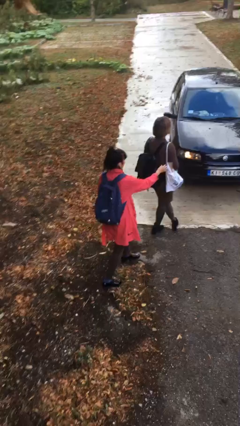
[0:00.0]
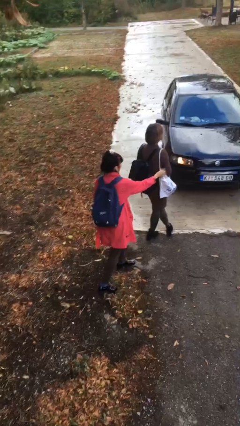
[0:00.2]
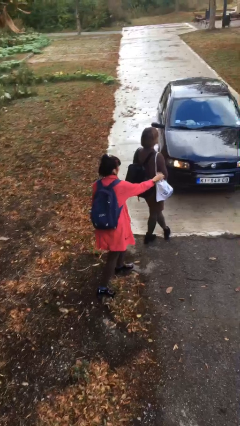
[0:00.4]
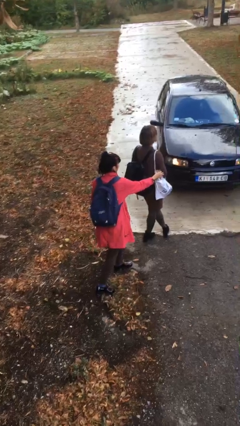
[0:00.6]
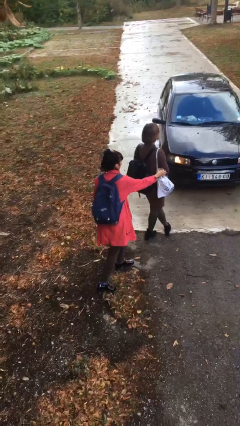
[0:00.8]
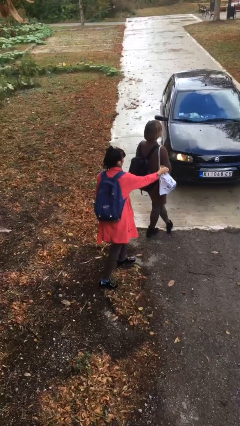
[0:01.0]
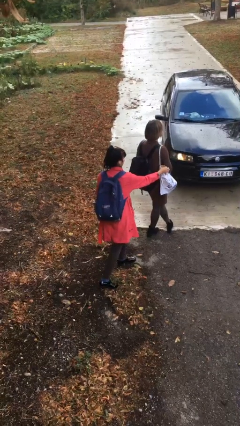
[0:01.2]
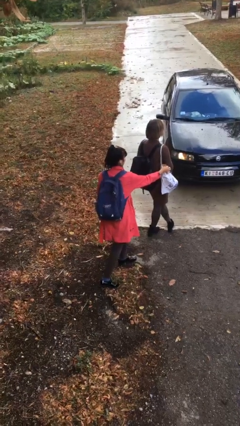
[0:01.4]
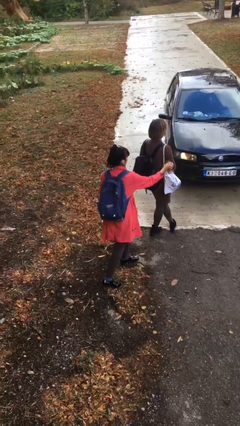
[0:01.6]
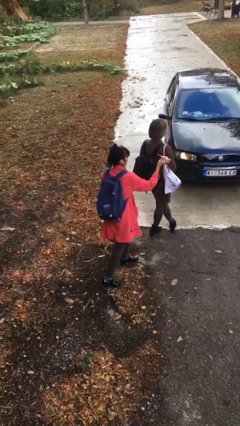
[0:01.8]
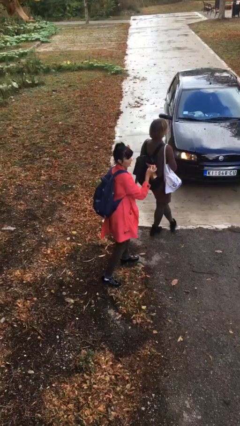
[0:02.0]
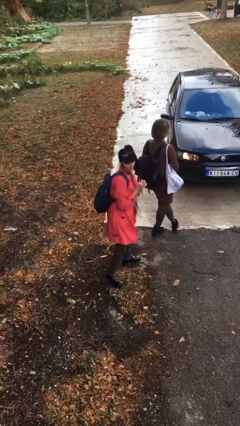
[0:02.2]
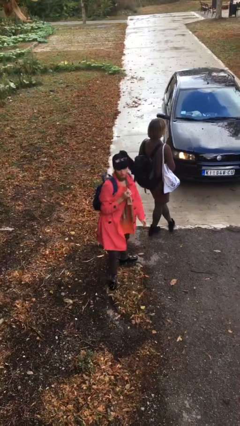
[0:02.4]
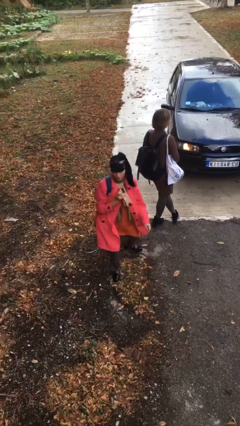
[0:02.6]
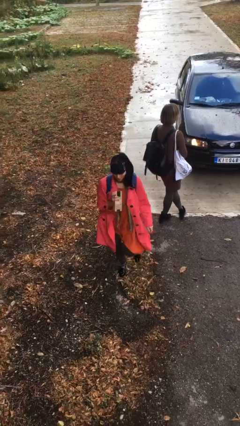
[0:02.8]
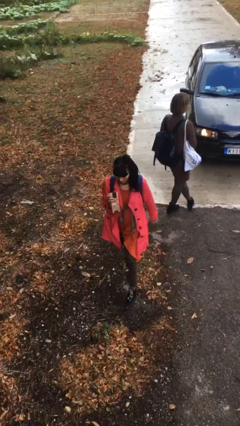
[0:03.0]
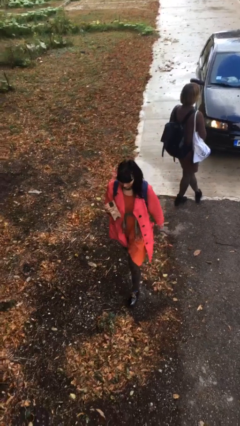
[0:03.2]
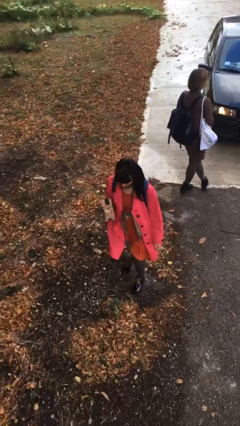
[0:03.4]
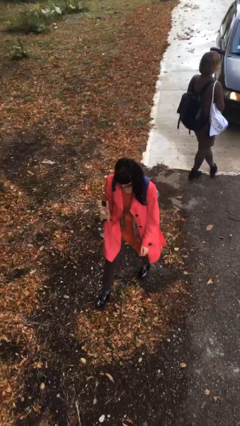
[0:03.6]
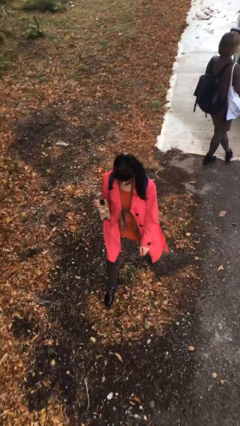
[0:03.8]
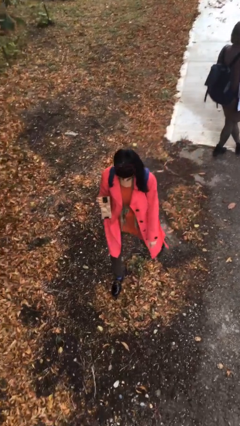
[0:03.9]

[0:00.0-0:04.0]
person steals object from person

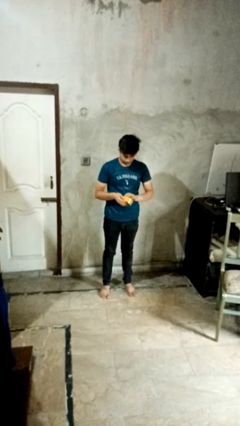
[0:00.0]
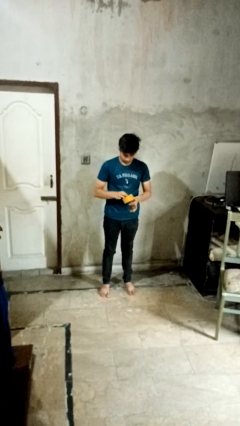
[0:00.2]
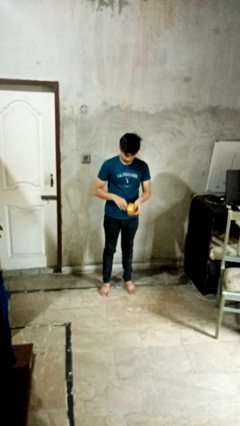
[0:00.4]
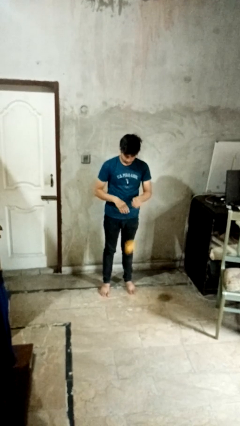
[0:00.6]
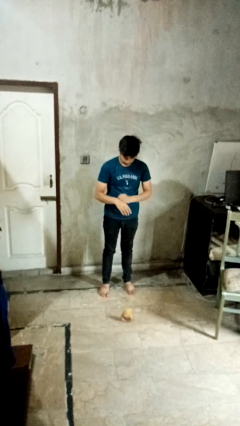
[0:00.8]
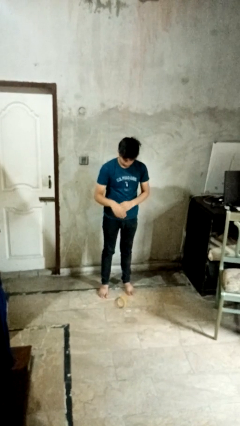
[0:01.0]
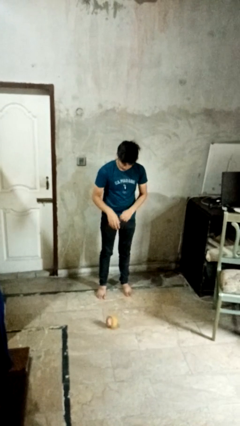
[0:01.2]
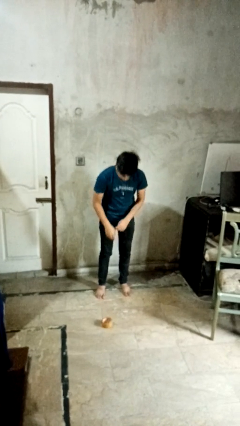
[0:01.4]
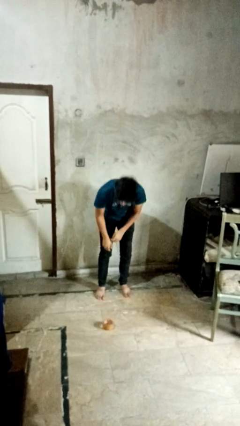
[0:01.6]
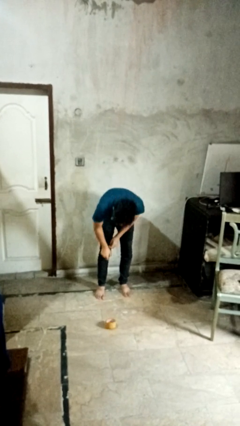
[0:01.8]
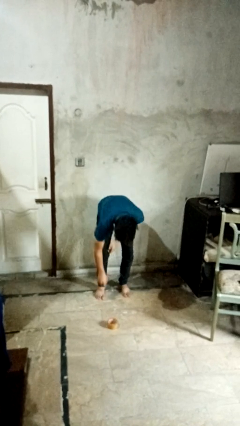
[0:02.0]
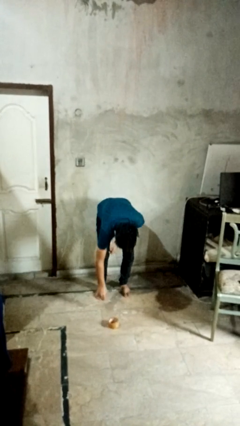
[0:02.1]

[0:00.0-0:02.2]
person drops object

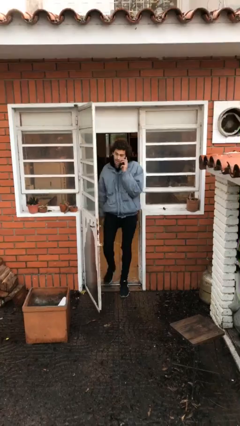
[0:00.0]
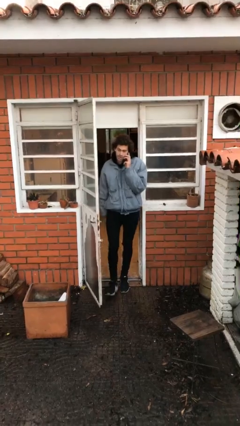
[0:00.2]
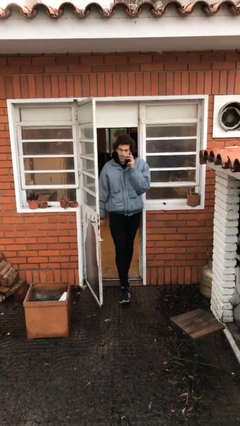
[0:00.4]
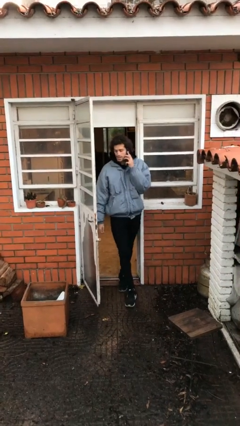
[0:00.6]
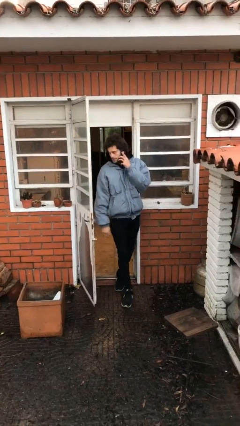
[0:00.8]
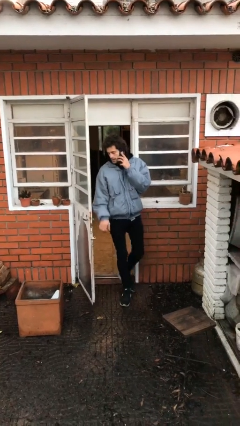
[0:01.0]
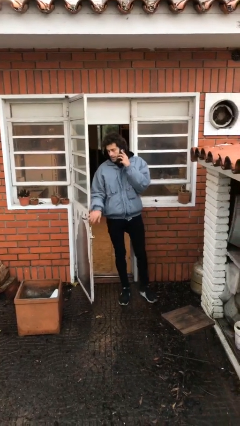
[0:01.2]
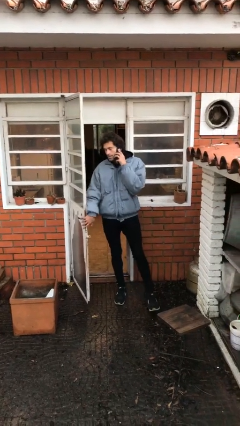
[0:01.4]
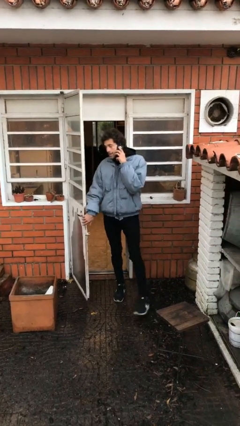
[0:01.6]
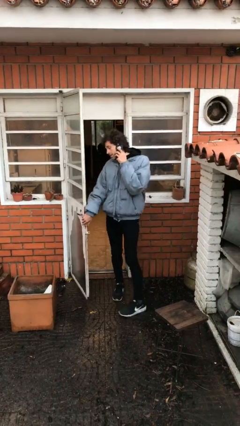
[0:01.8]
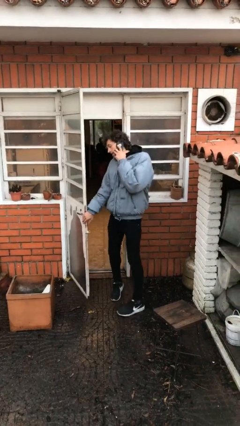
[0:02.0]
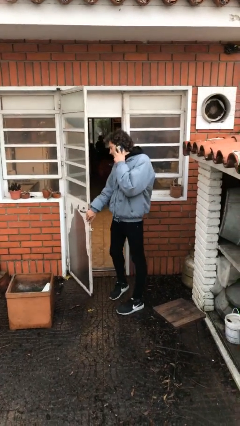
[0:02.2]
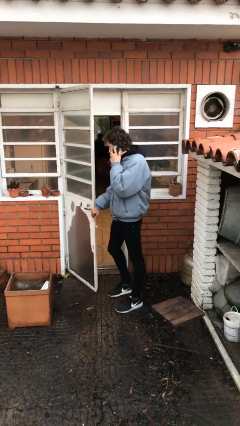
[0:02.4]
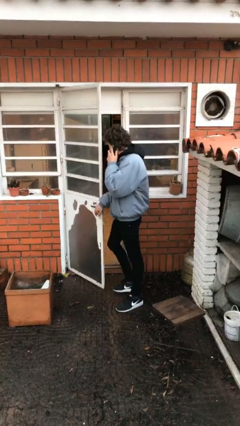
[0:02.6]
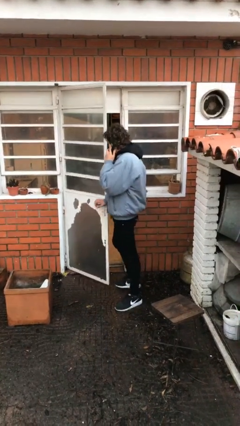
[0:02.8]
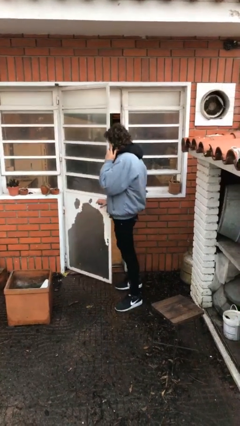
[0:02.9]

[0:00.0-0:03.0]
person enters scene through structure

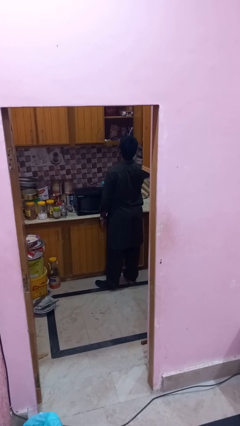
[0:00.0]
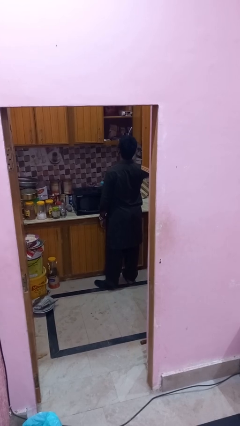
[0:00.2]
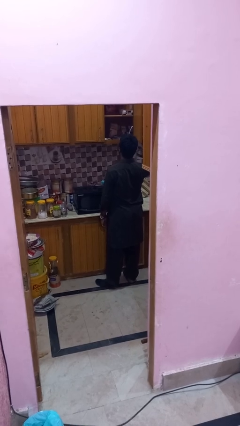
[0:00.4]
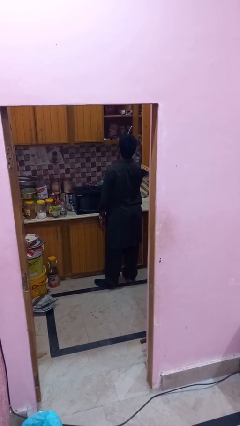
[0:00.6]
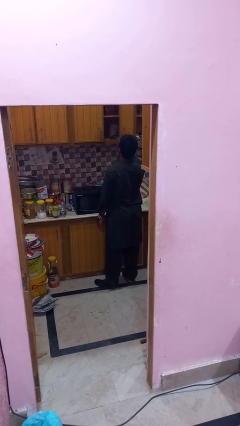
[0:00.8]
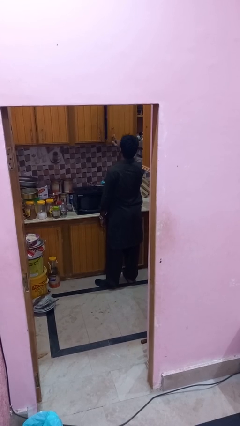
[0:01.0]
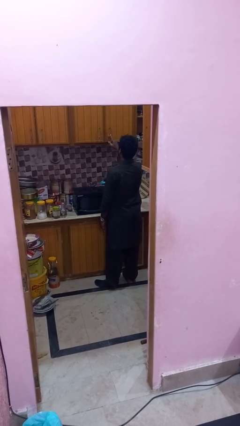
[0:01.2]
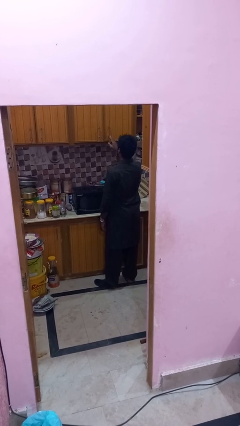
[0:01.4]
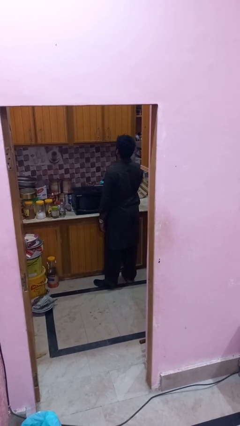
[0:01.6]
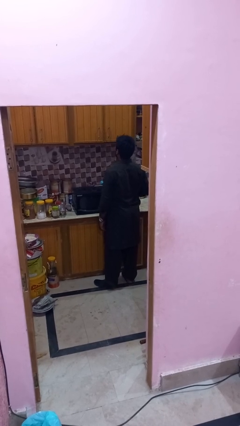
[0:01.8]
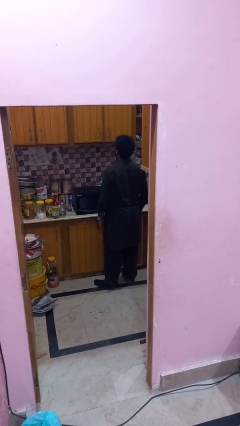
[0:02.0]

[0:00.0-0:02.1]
person closes cabinet

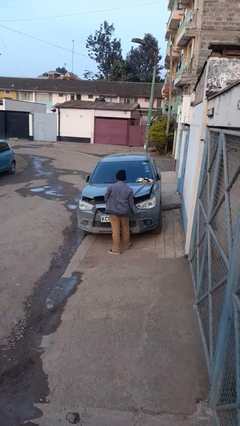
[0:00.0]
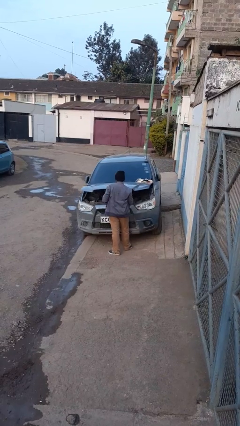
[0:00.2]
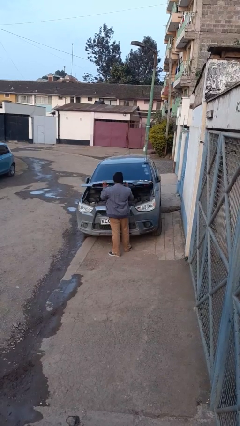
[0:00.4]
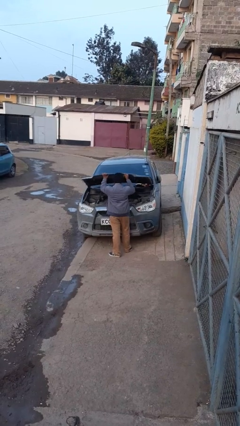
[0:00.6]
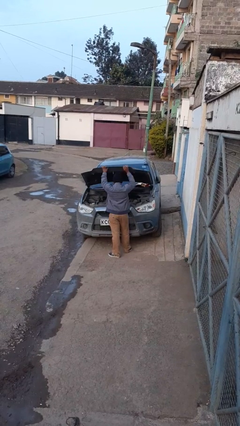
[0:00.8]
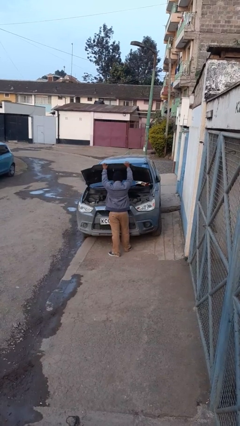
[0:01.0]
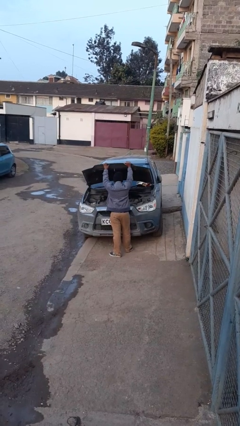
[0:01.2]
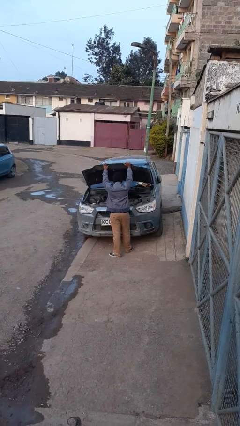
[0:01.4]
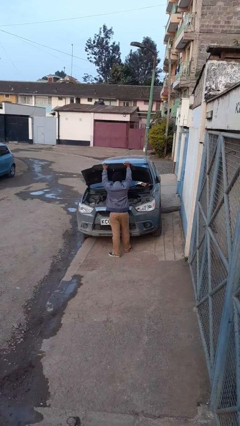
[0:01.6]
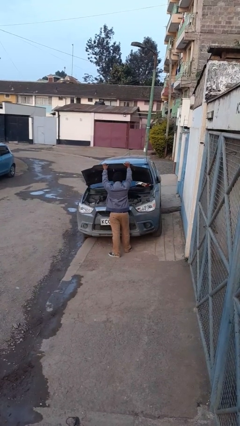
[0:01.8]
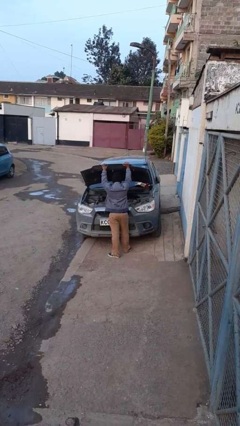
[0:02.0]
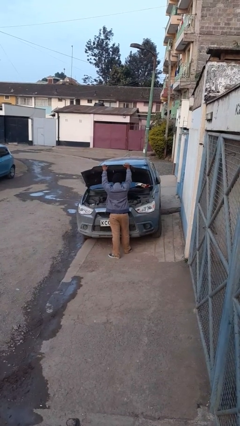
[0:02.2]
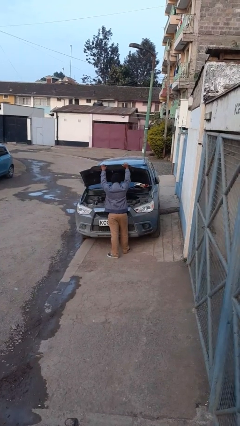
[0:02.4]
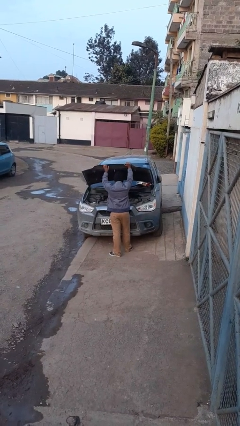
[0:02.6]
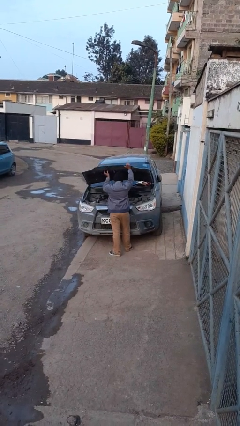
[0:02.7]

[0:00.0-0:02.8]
person opens car hood

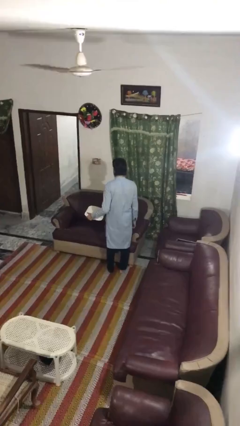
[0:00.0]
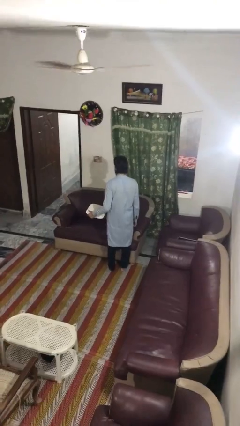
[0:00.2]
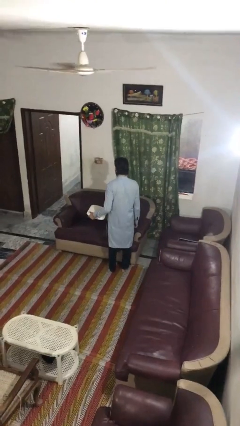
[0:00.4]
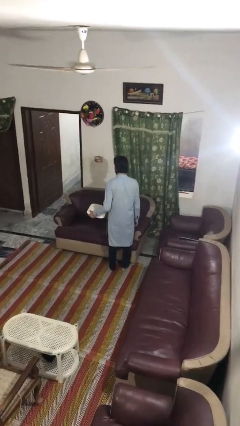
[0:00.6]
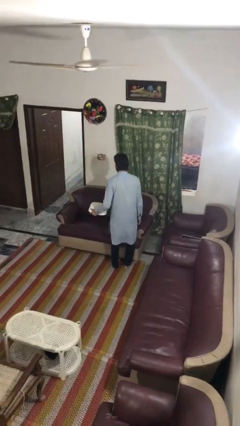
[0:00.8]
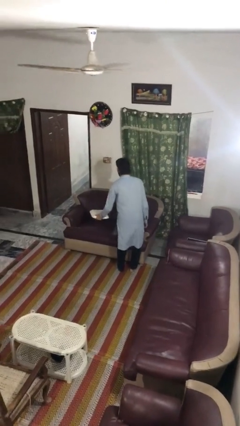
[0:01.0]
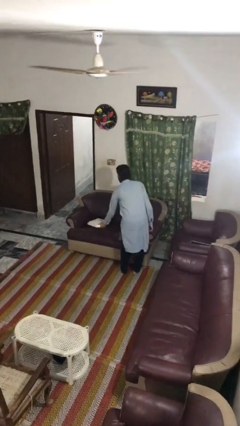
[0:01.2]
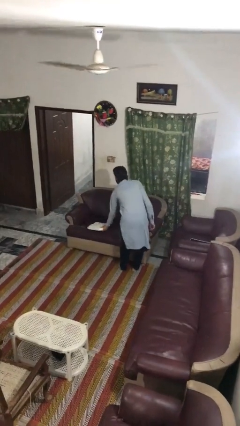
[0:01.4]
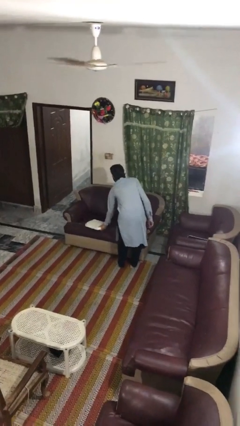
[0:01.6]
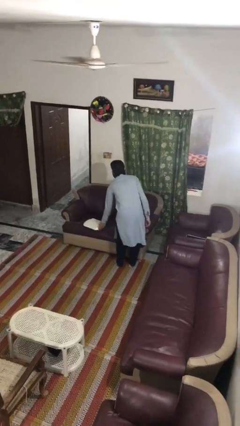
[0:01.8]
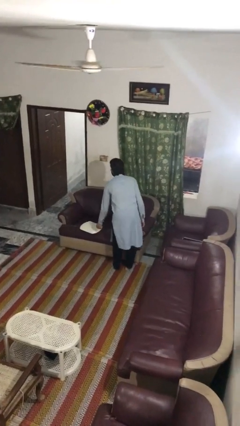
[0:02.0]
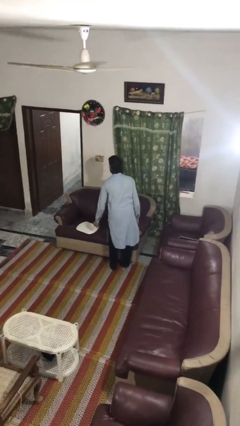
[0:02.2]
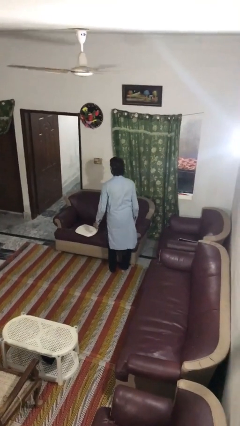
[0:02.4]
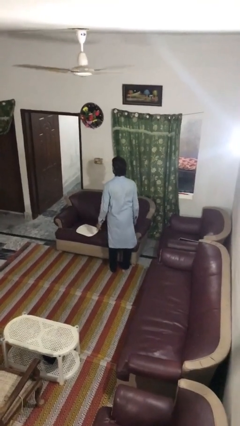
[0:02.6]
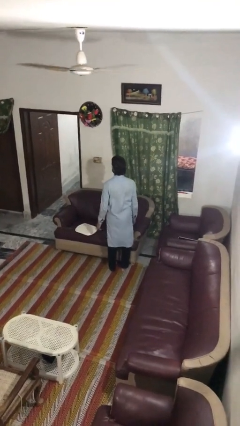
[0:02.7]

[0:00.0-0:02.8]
person puts down object on couch

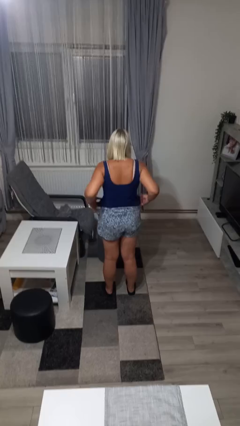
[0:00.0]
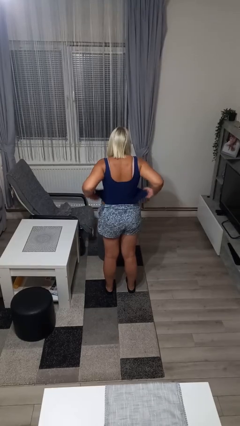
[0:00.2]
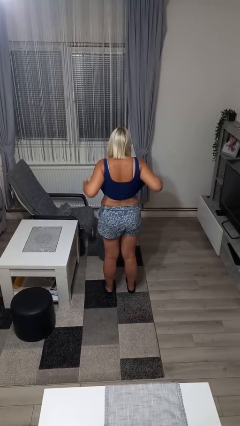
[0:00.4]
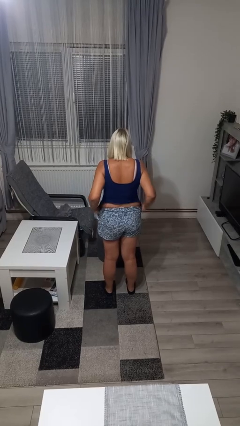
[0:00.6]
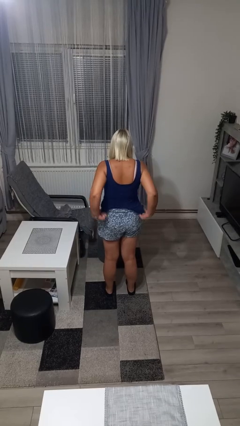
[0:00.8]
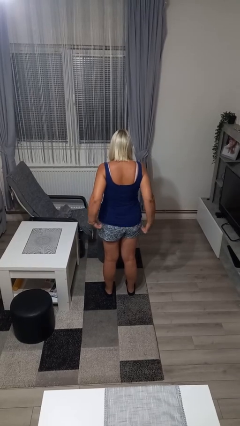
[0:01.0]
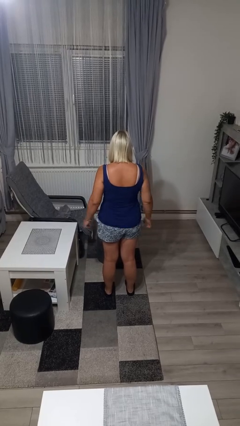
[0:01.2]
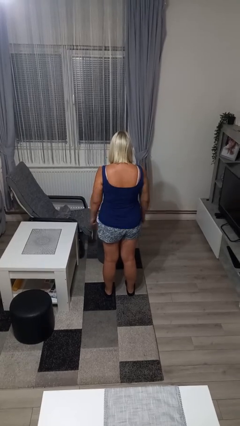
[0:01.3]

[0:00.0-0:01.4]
person untucks shirt
